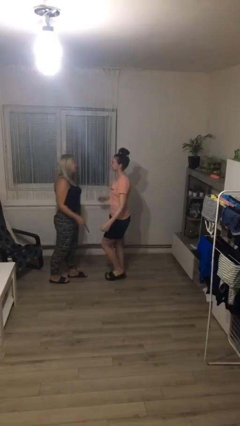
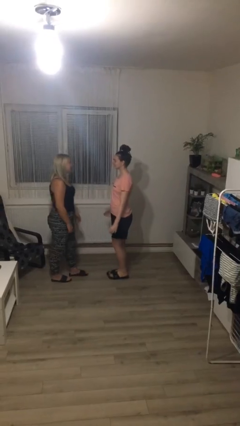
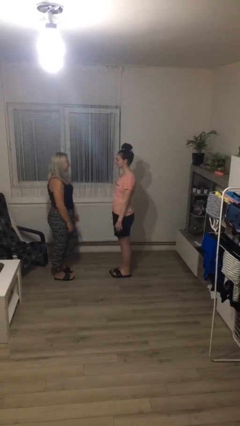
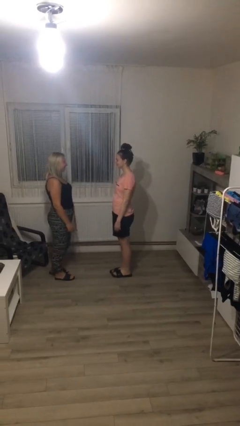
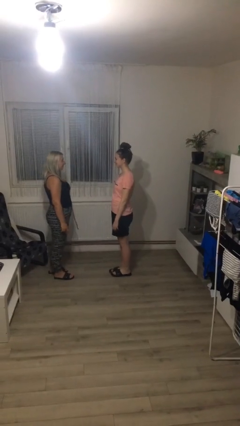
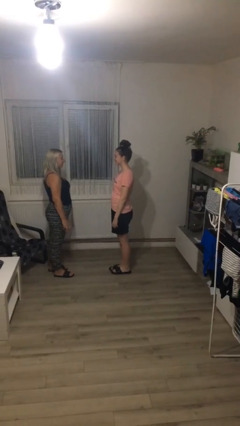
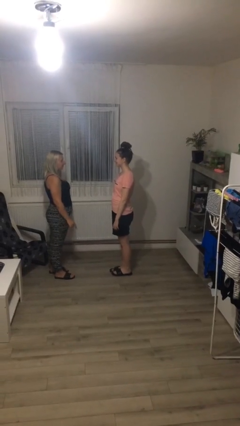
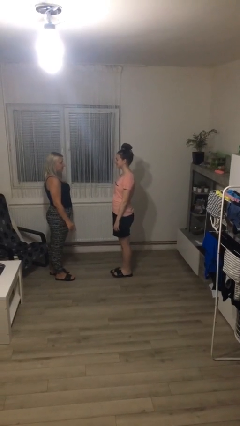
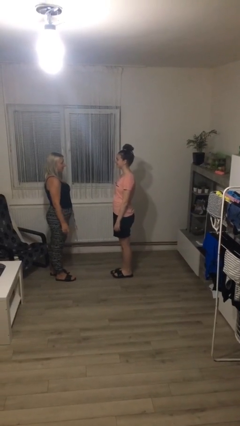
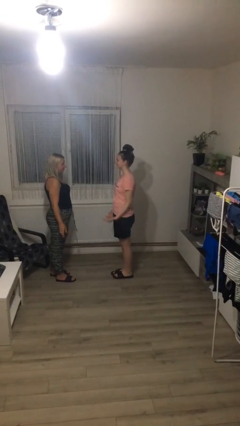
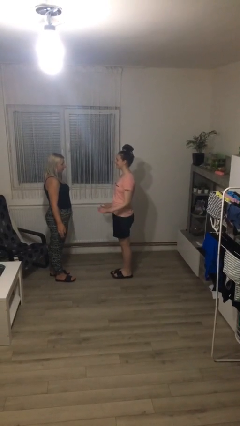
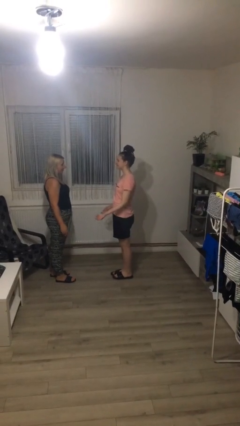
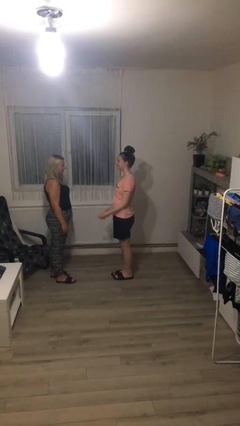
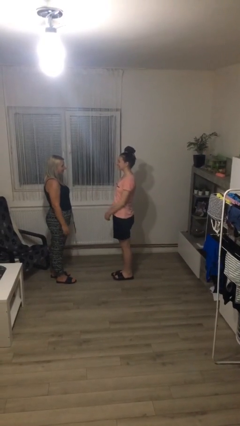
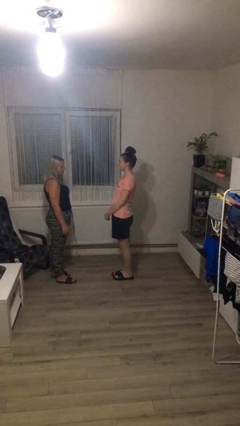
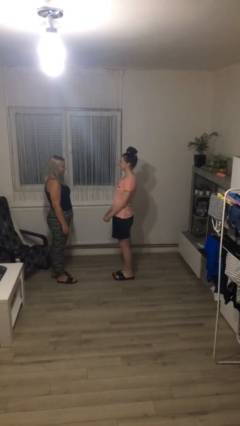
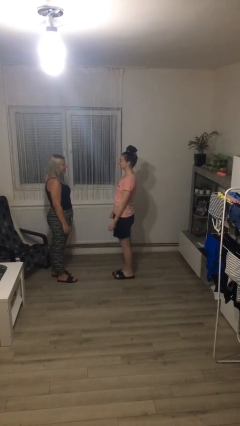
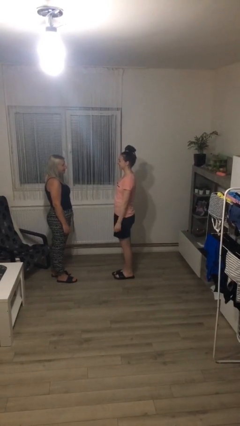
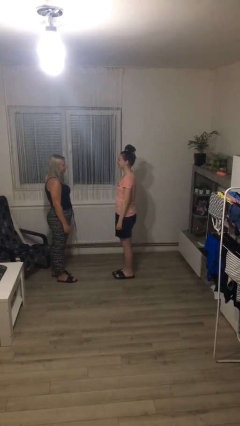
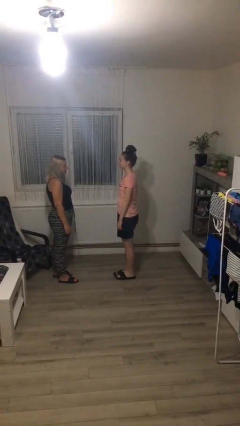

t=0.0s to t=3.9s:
person talks to person

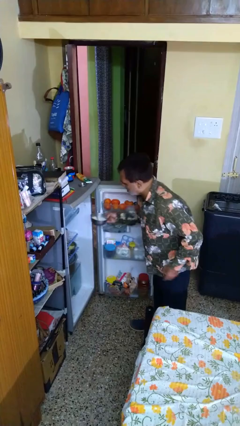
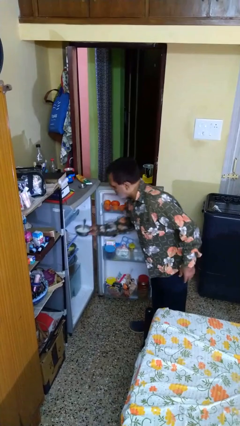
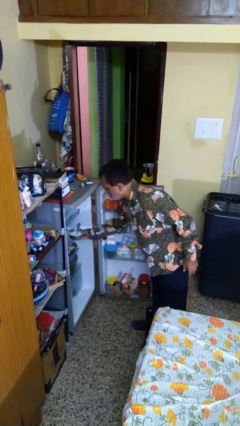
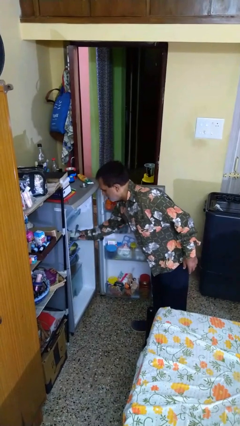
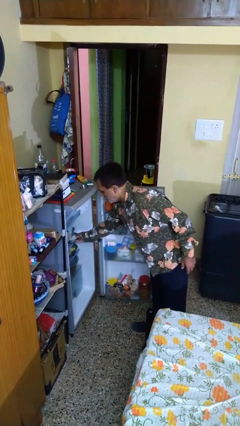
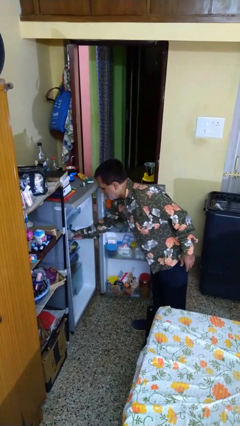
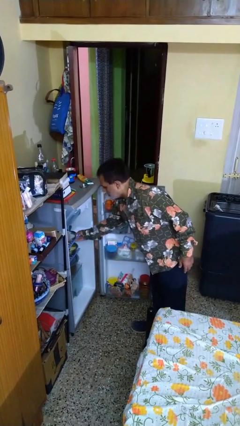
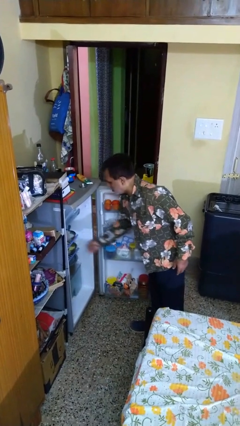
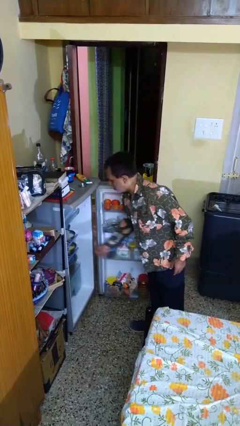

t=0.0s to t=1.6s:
person puts object into refrigerator

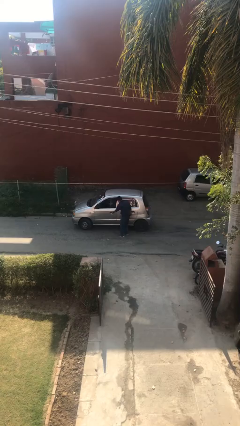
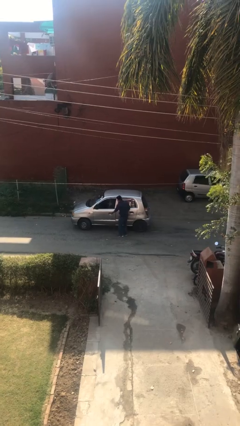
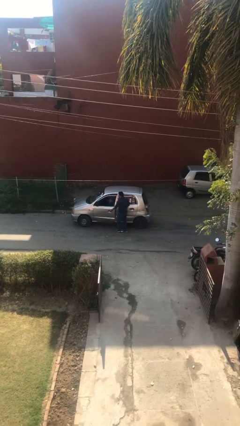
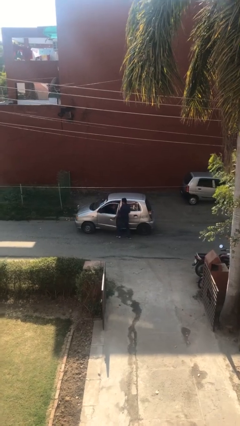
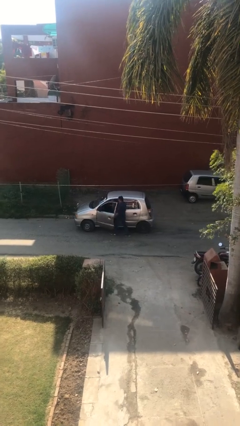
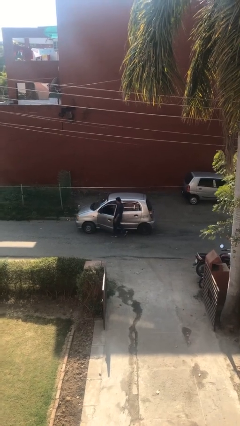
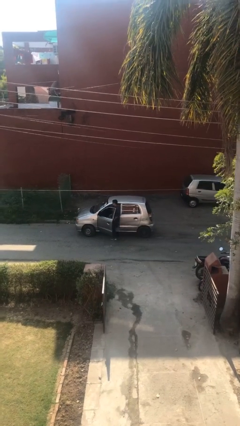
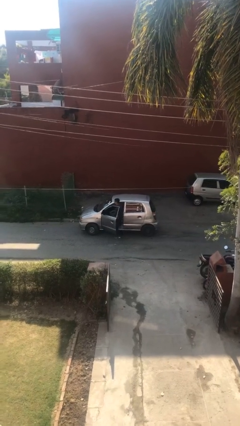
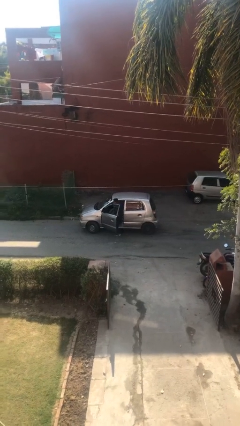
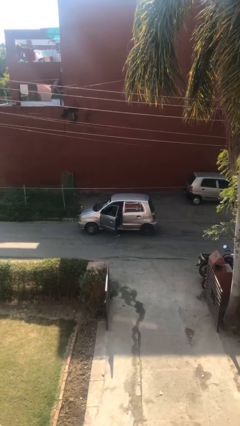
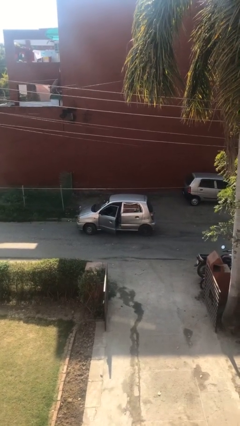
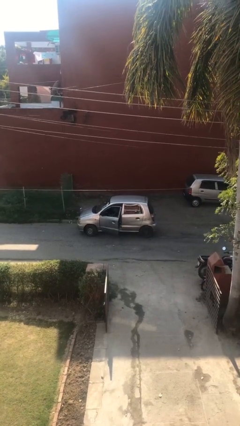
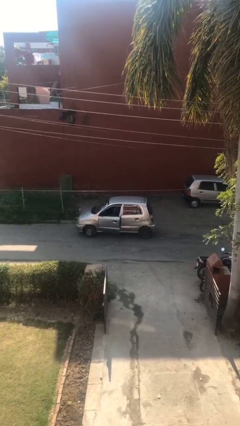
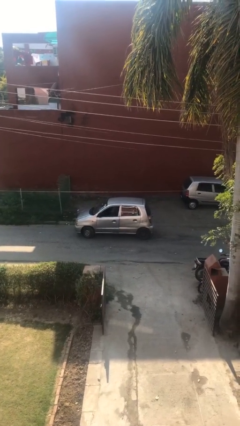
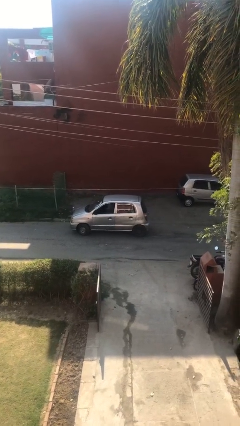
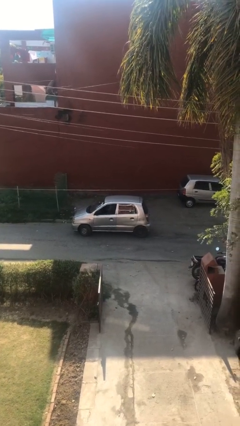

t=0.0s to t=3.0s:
car picks up person

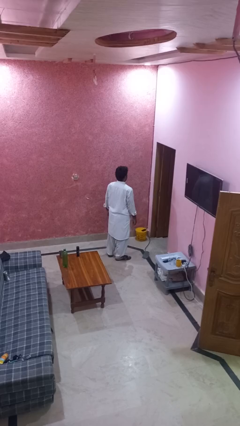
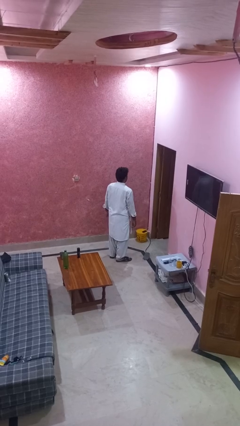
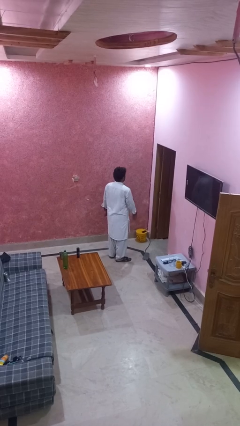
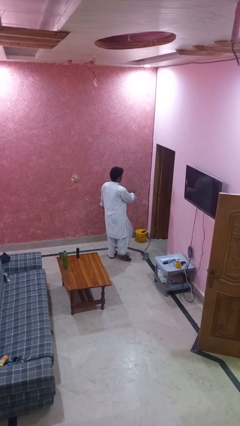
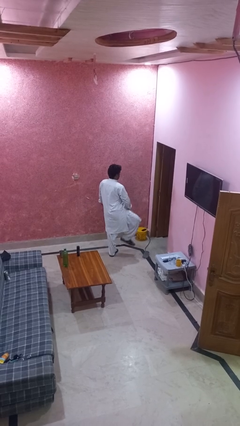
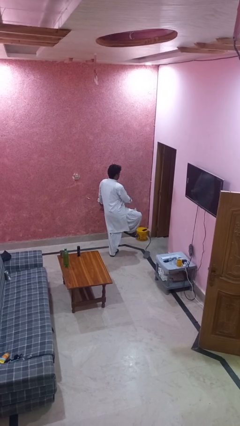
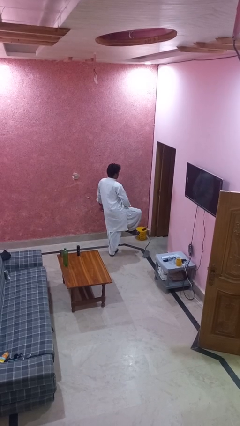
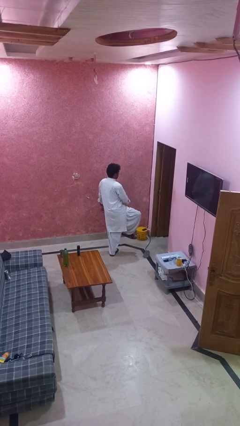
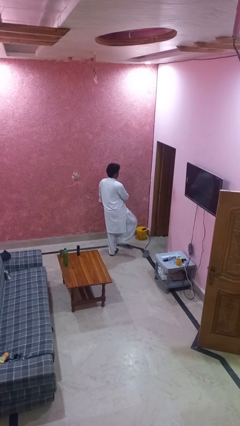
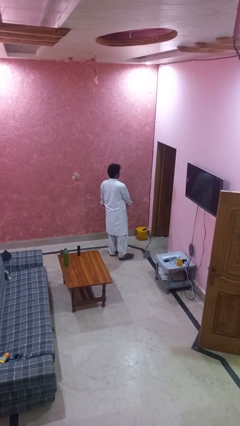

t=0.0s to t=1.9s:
person slaps hands on thighs

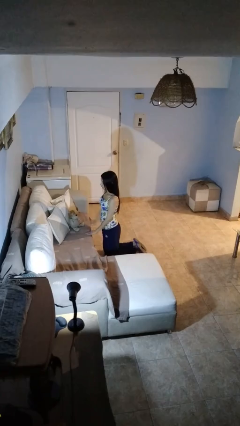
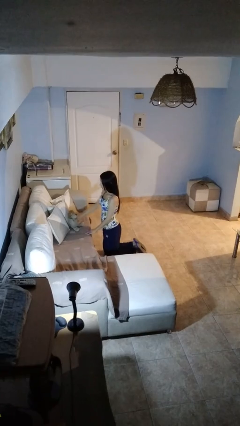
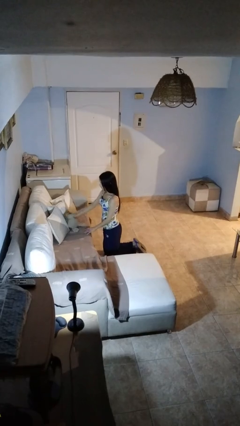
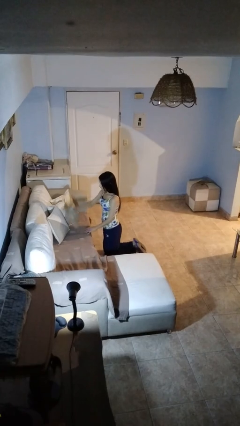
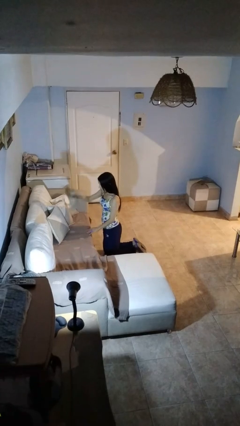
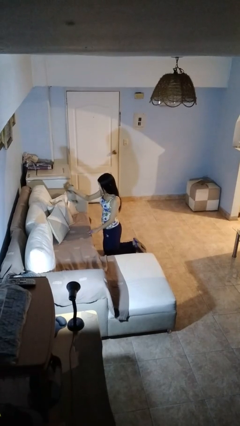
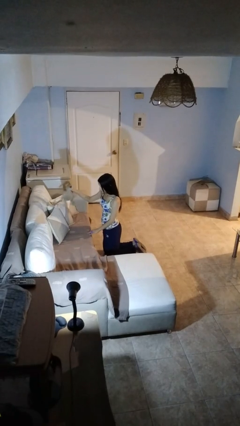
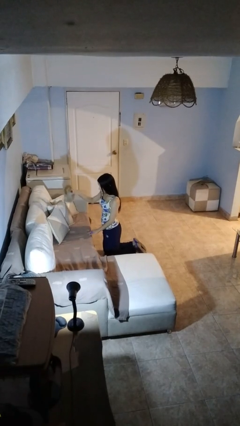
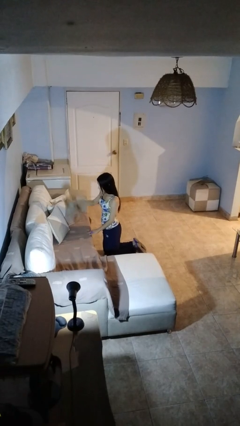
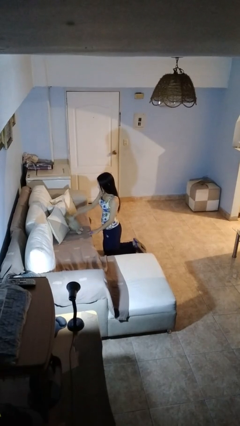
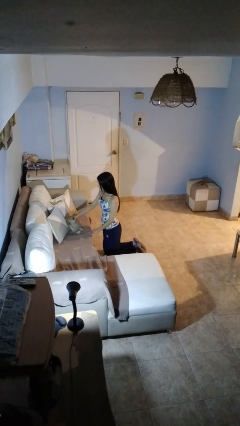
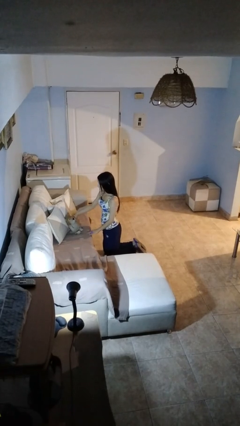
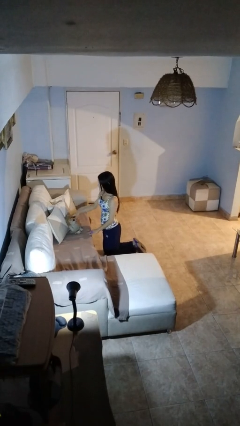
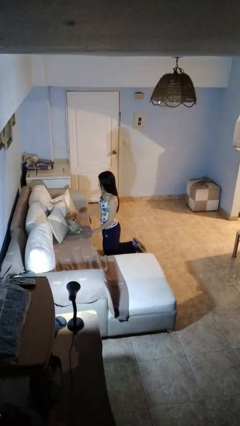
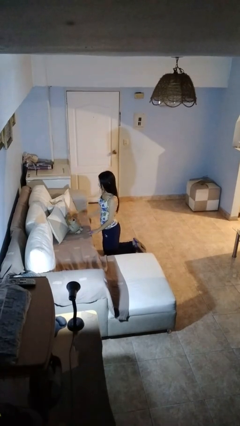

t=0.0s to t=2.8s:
person searches in couch

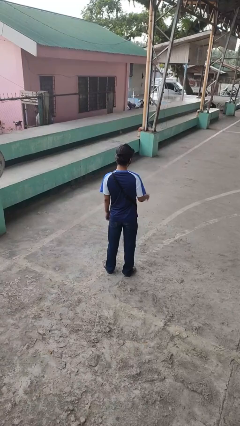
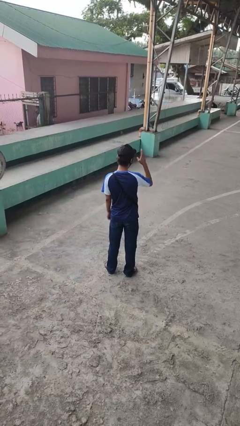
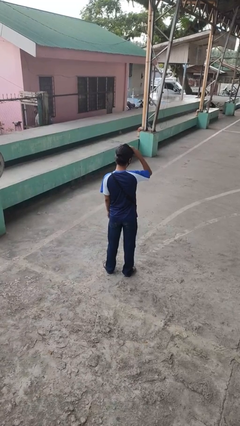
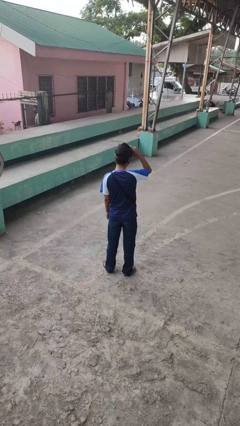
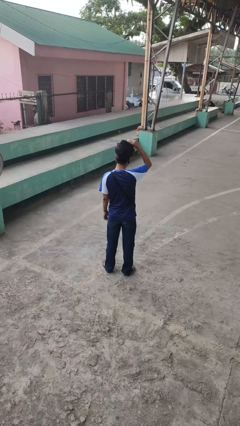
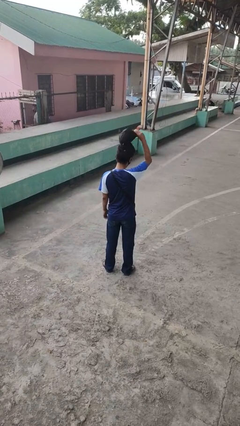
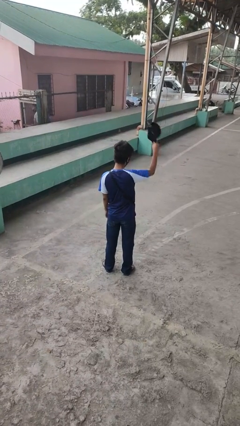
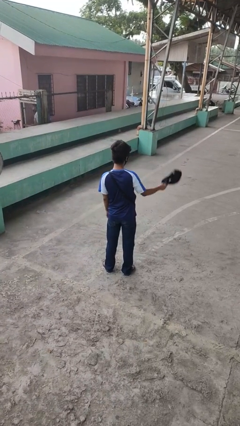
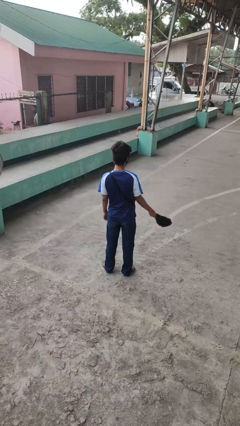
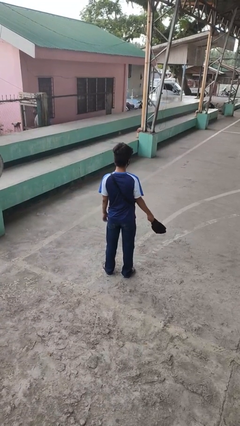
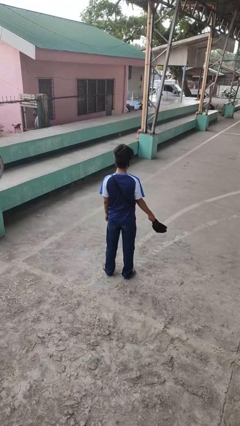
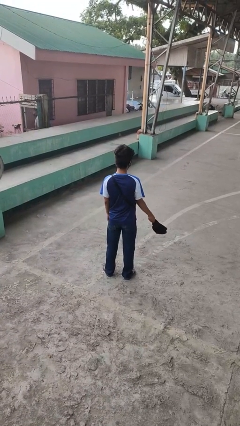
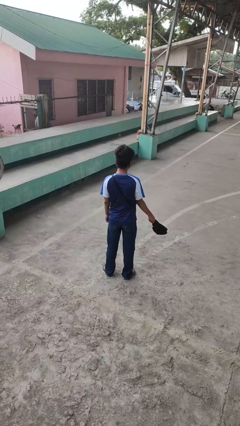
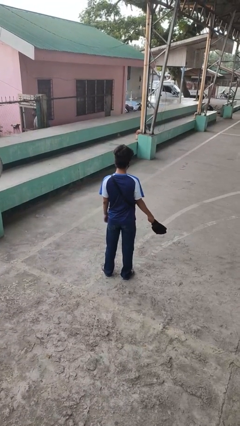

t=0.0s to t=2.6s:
person takes off hat

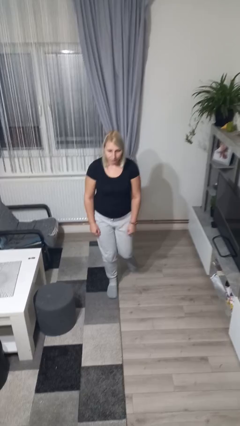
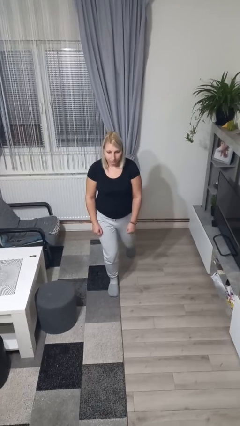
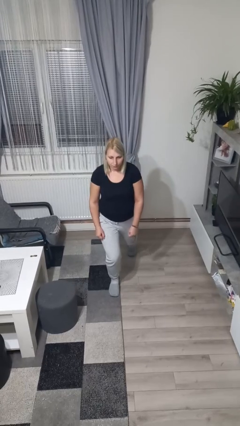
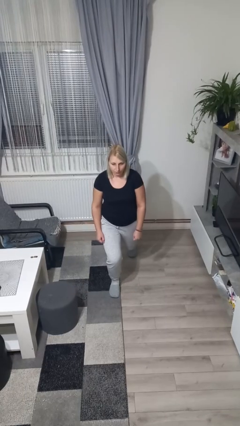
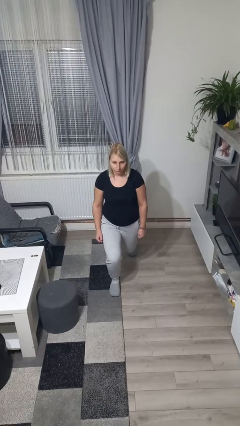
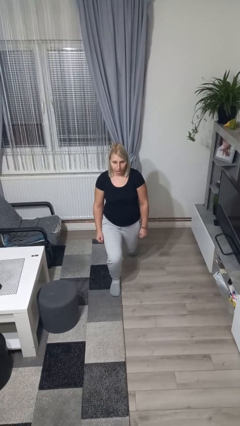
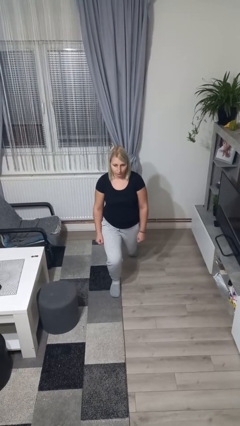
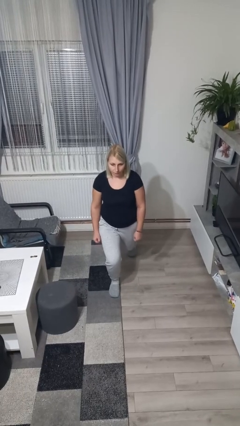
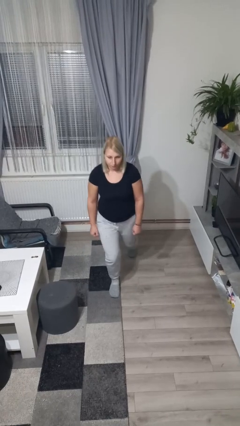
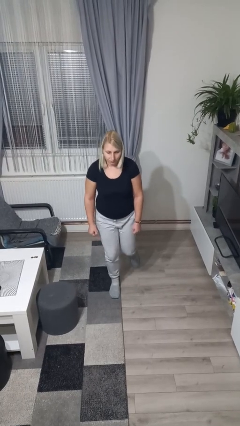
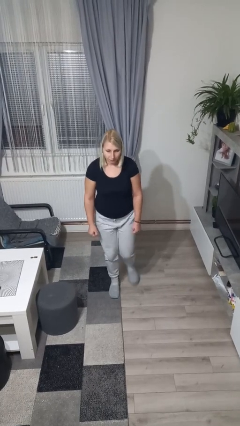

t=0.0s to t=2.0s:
person exercises with lunges
